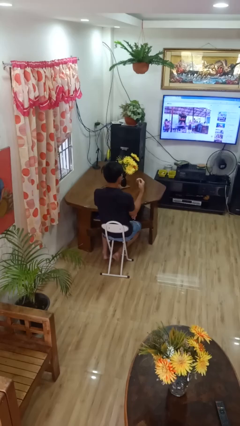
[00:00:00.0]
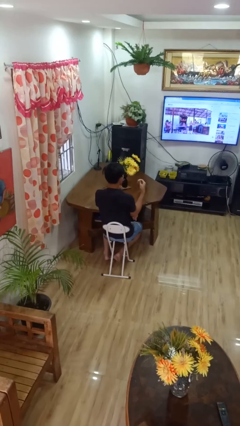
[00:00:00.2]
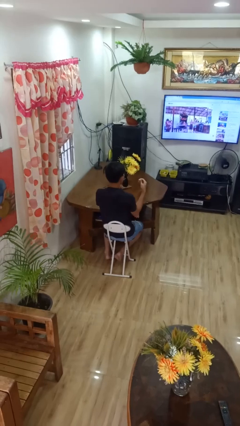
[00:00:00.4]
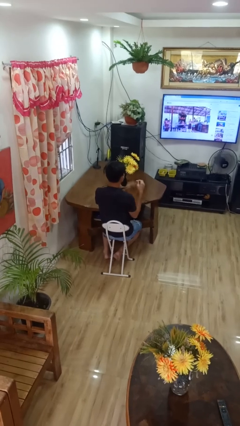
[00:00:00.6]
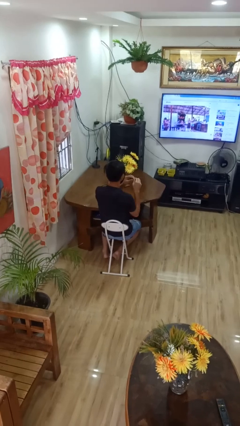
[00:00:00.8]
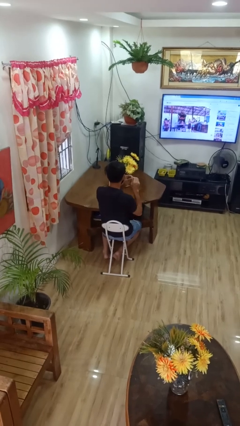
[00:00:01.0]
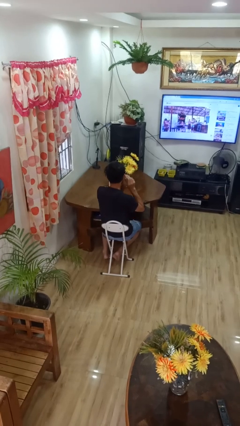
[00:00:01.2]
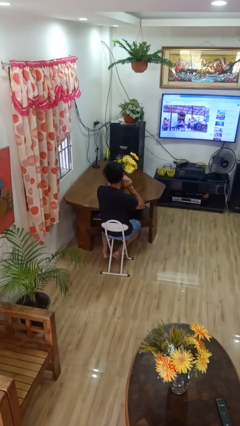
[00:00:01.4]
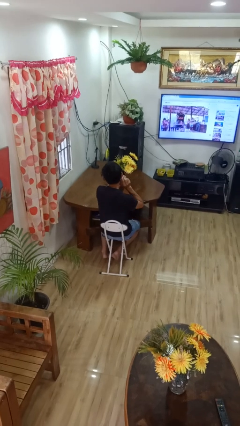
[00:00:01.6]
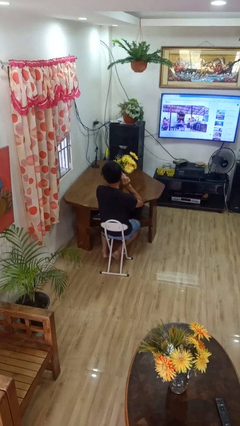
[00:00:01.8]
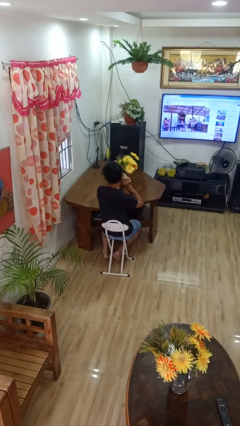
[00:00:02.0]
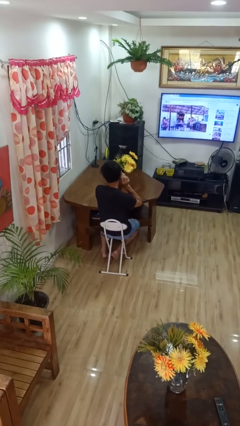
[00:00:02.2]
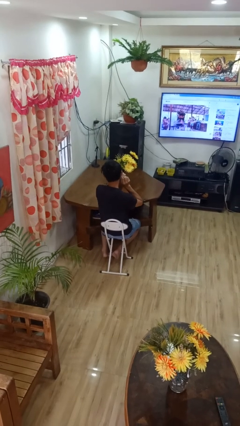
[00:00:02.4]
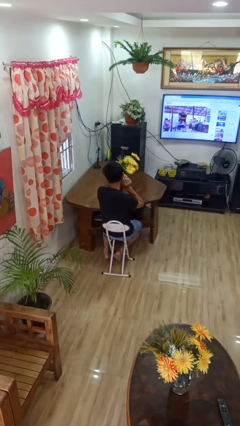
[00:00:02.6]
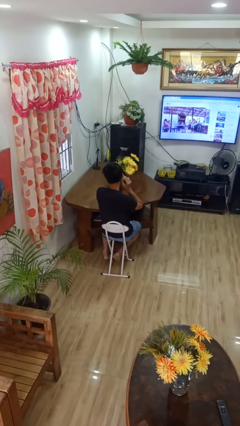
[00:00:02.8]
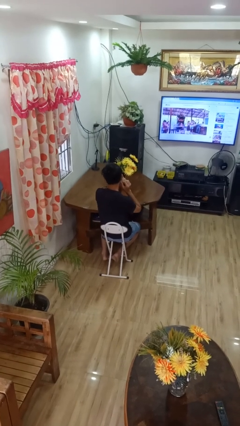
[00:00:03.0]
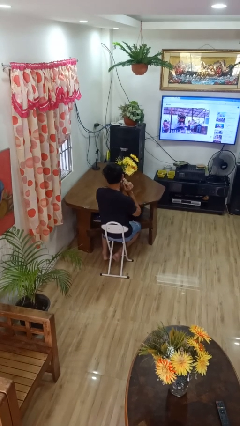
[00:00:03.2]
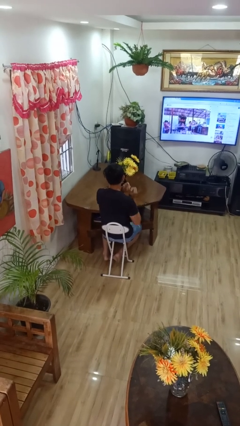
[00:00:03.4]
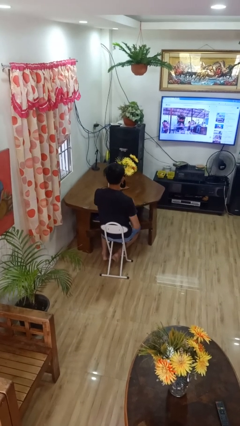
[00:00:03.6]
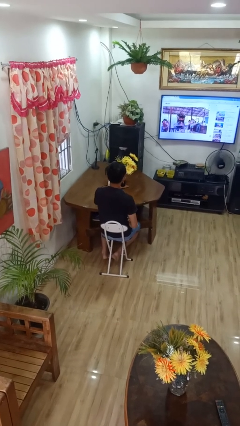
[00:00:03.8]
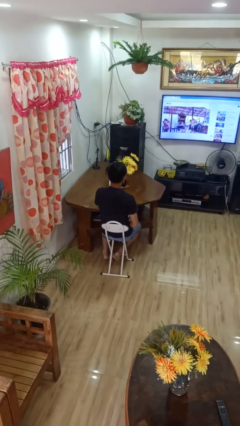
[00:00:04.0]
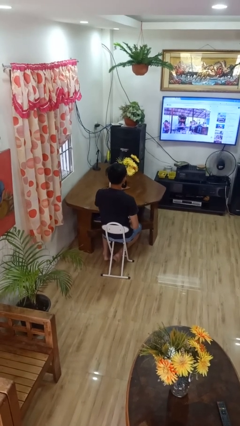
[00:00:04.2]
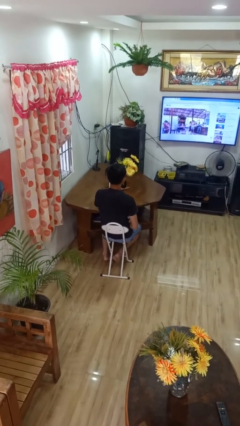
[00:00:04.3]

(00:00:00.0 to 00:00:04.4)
person puts on earrings

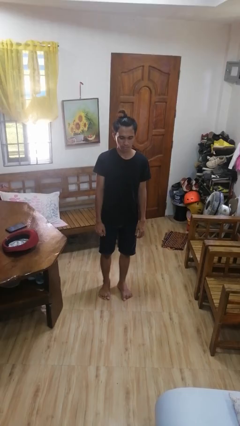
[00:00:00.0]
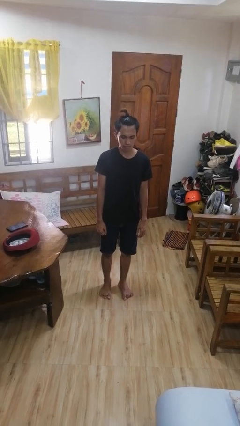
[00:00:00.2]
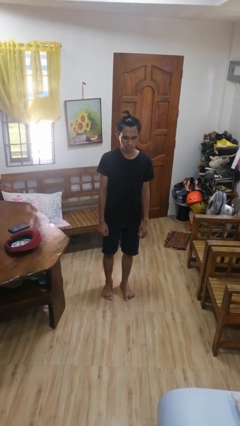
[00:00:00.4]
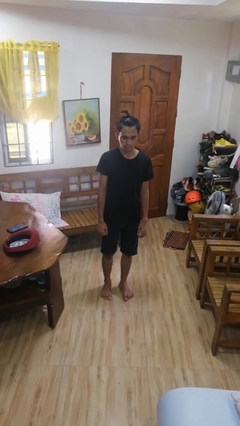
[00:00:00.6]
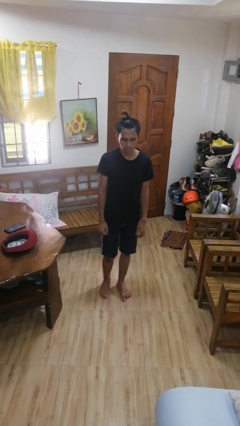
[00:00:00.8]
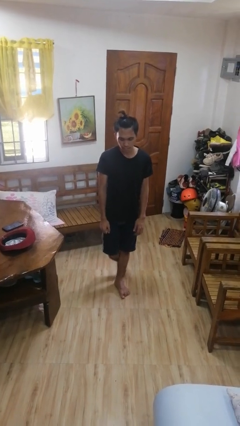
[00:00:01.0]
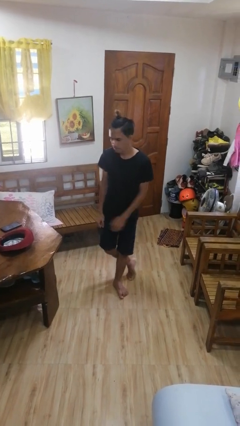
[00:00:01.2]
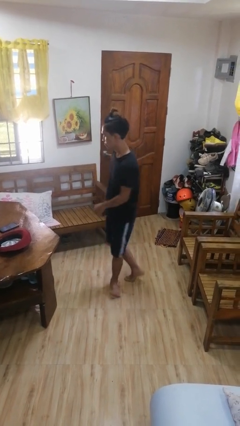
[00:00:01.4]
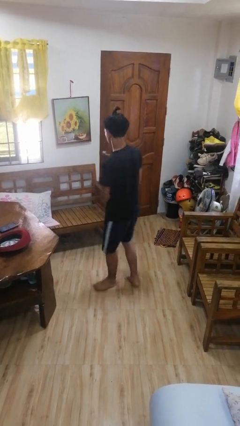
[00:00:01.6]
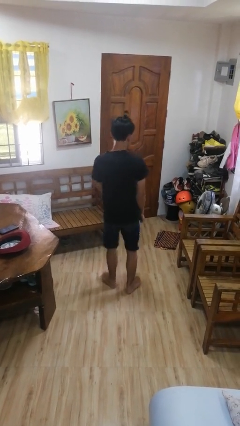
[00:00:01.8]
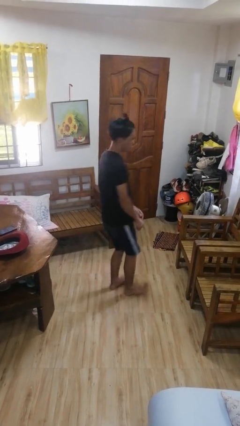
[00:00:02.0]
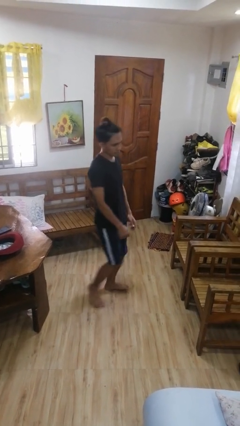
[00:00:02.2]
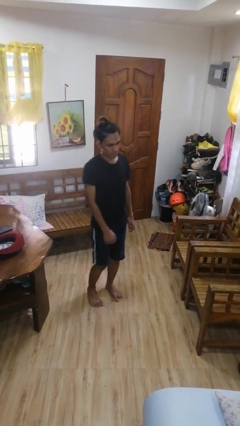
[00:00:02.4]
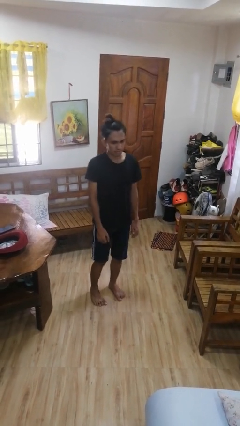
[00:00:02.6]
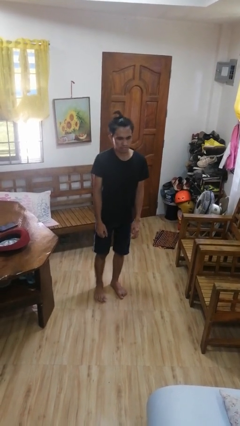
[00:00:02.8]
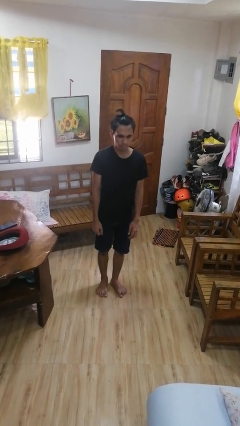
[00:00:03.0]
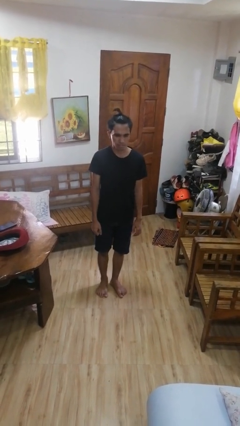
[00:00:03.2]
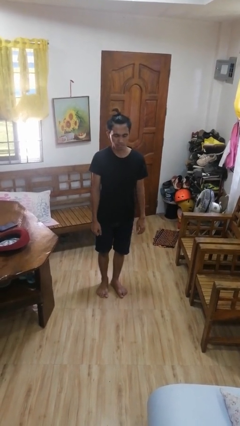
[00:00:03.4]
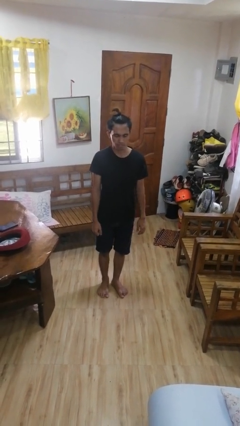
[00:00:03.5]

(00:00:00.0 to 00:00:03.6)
person twirls

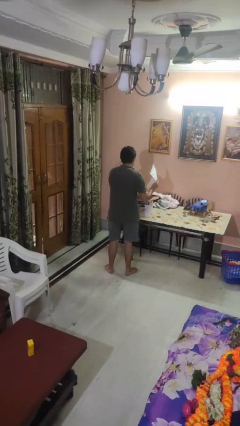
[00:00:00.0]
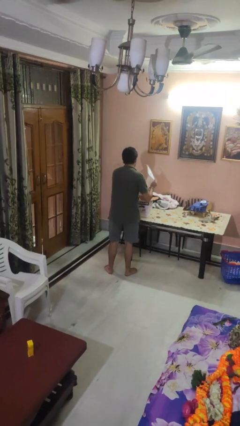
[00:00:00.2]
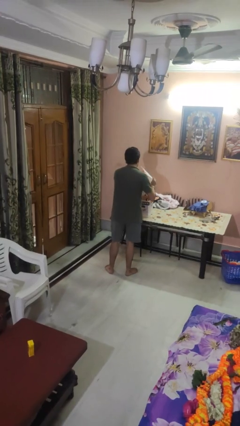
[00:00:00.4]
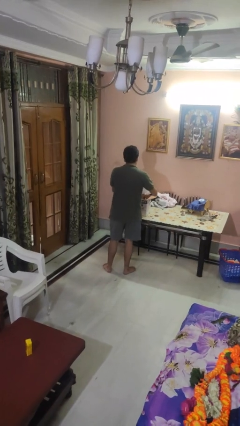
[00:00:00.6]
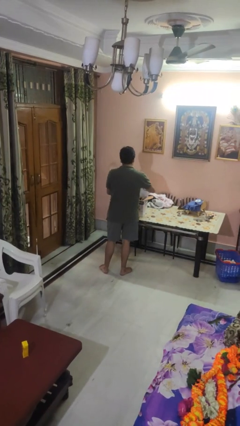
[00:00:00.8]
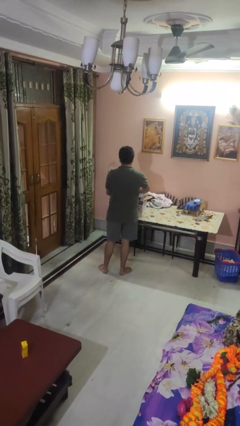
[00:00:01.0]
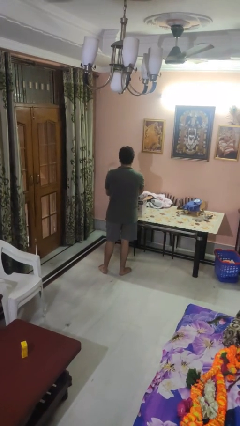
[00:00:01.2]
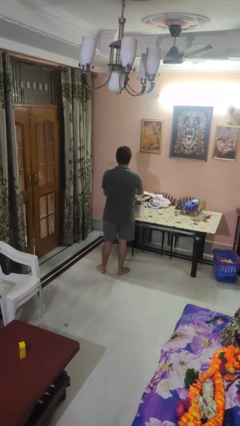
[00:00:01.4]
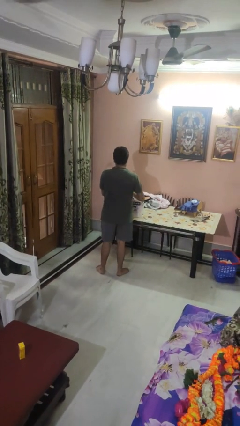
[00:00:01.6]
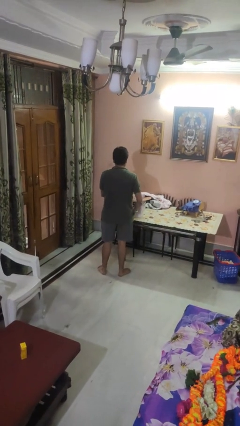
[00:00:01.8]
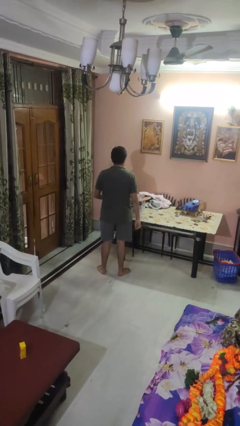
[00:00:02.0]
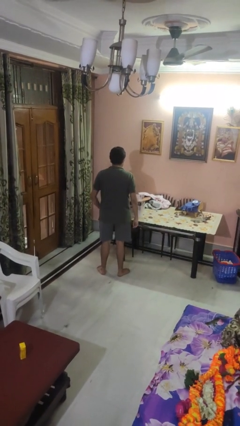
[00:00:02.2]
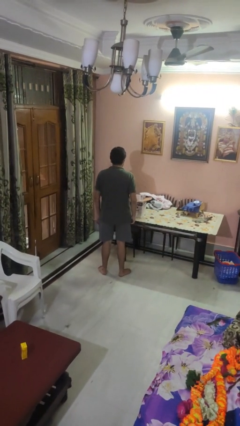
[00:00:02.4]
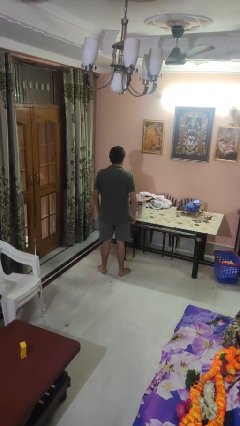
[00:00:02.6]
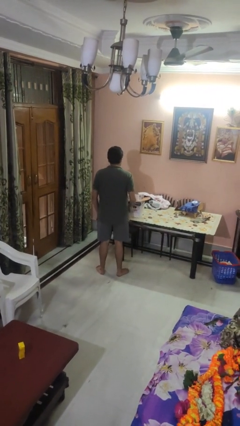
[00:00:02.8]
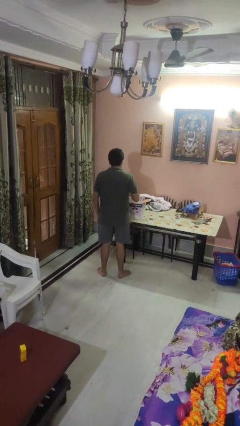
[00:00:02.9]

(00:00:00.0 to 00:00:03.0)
person puts object into box

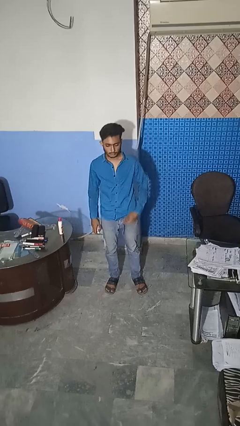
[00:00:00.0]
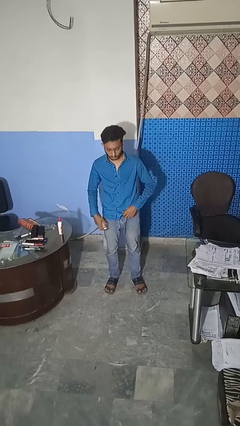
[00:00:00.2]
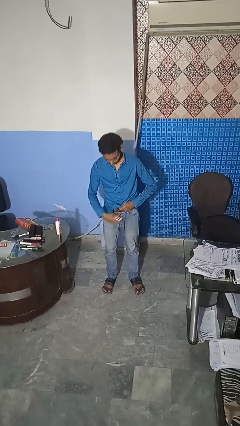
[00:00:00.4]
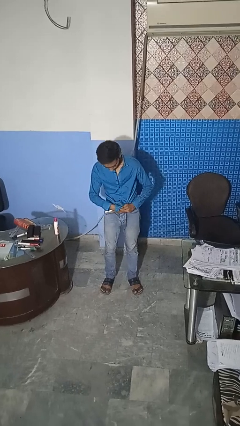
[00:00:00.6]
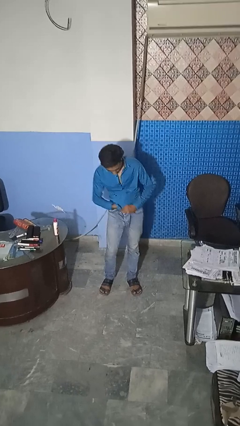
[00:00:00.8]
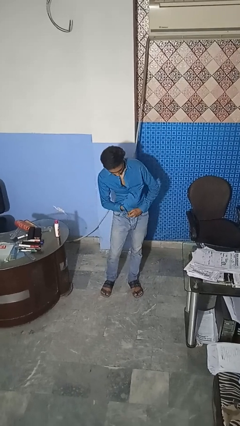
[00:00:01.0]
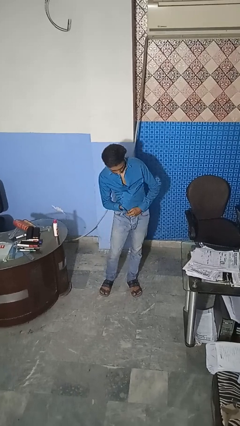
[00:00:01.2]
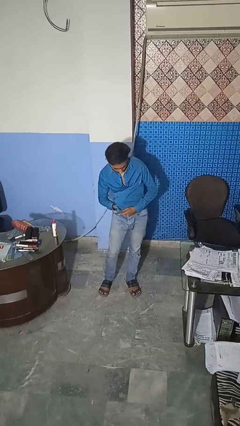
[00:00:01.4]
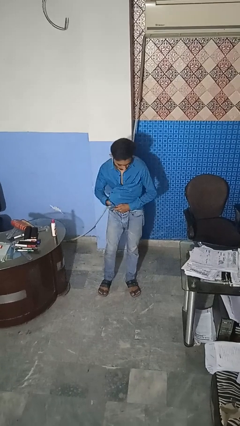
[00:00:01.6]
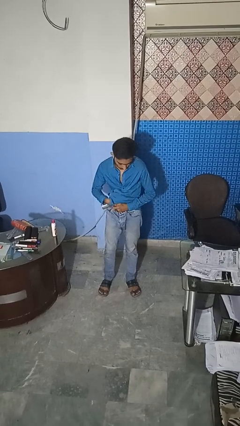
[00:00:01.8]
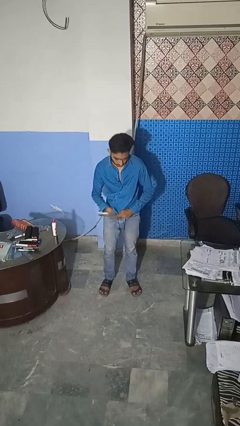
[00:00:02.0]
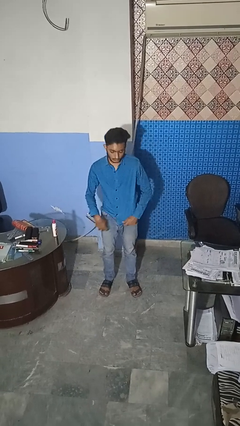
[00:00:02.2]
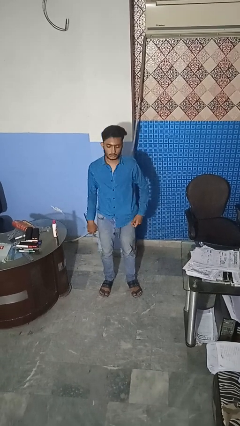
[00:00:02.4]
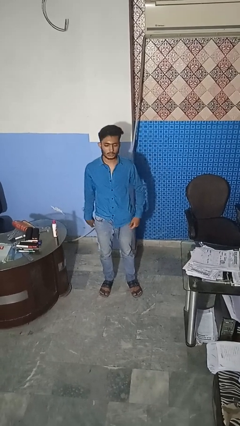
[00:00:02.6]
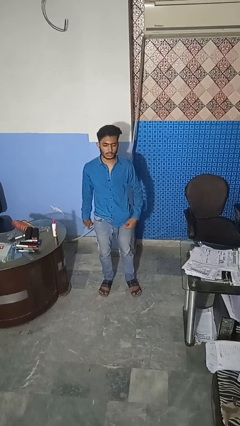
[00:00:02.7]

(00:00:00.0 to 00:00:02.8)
person applies deodorant

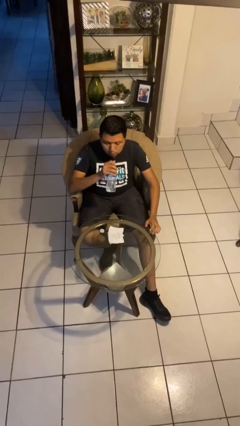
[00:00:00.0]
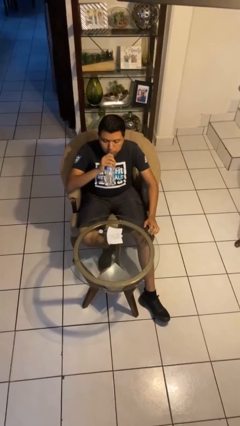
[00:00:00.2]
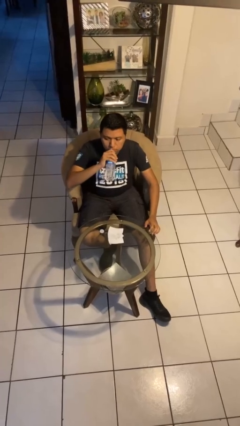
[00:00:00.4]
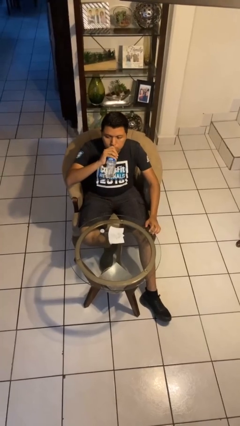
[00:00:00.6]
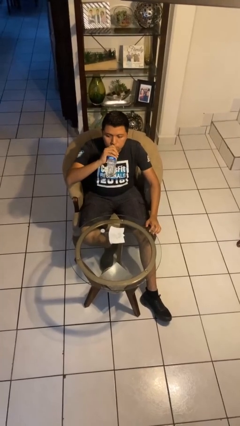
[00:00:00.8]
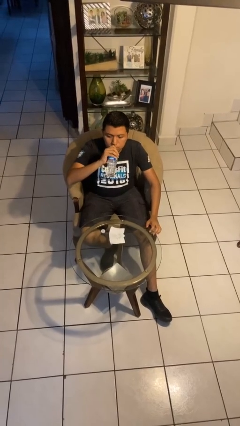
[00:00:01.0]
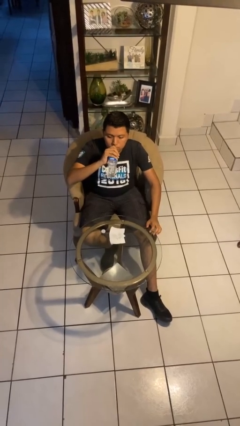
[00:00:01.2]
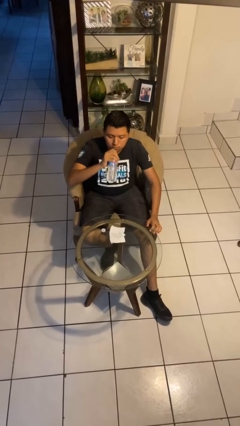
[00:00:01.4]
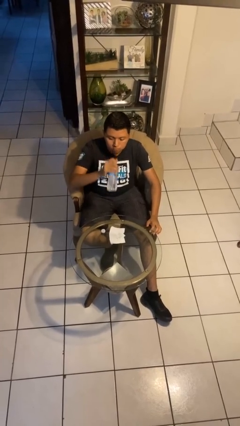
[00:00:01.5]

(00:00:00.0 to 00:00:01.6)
person drinks from bottle

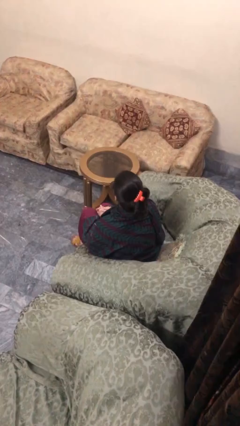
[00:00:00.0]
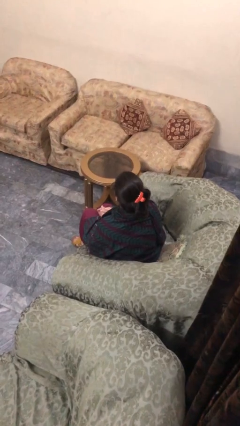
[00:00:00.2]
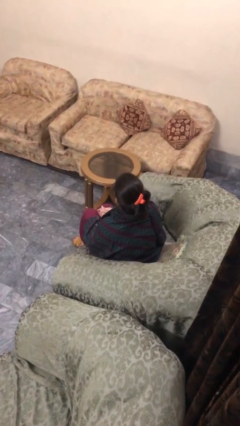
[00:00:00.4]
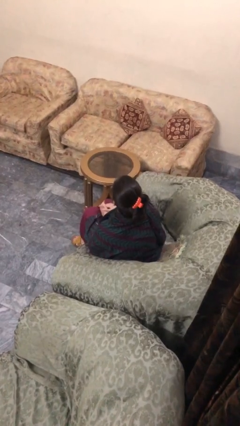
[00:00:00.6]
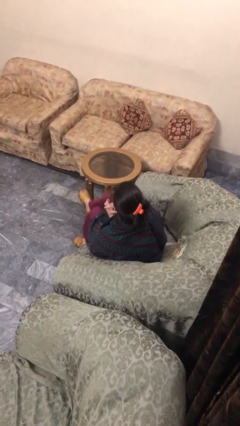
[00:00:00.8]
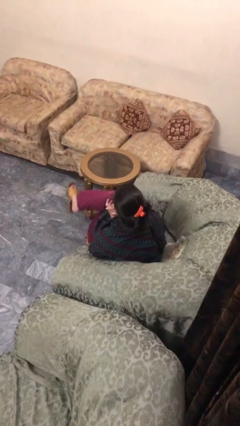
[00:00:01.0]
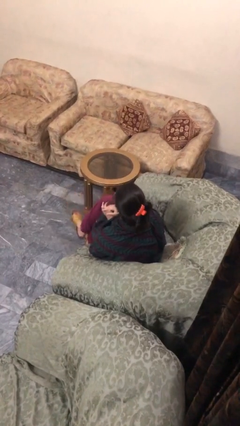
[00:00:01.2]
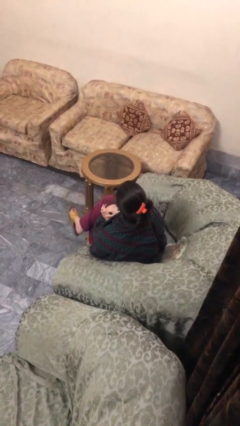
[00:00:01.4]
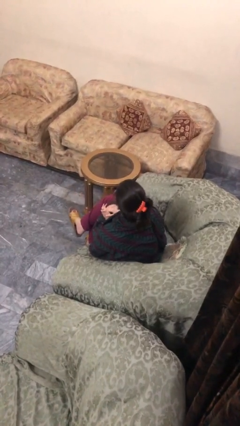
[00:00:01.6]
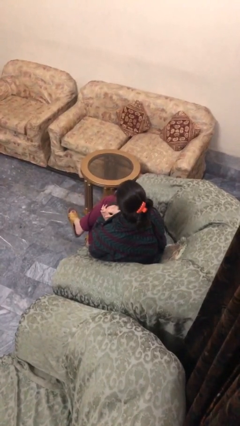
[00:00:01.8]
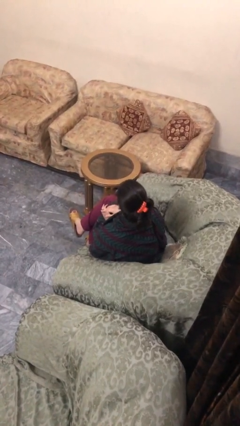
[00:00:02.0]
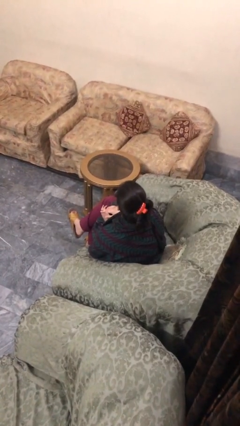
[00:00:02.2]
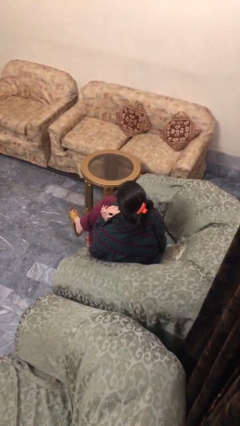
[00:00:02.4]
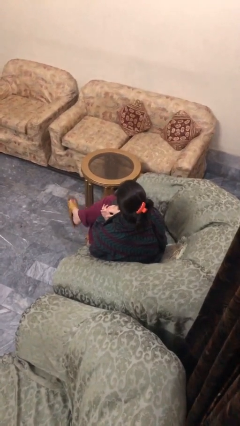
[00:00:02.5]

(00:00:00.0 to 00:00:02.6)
person crosses legs
